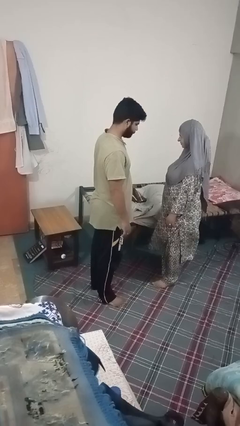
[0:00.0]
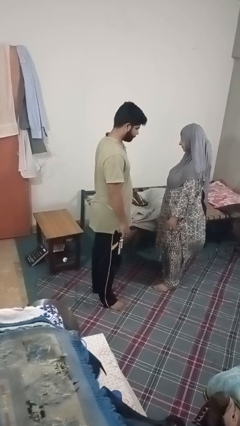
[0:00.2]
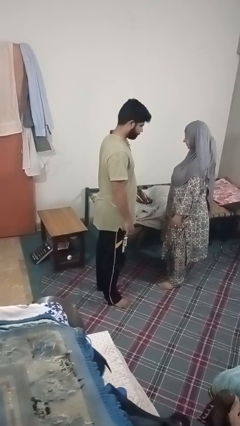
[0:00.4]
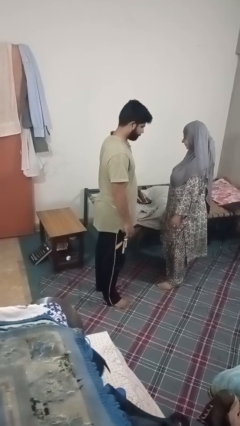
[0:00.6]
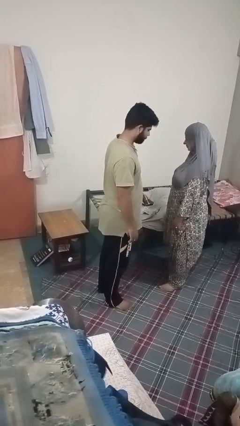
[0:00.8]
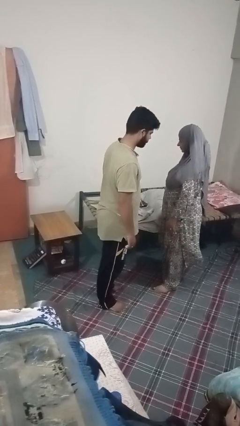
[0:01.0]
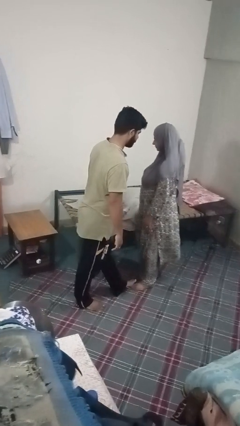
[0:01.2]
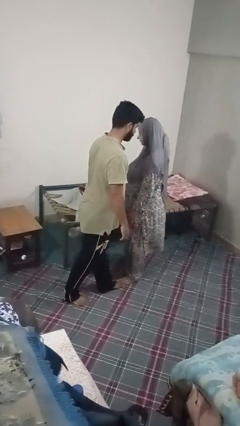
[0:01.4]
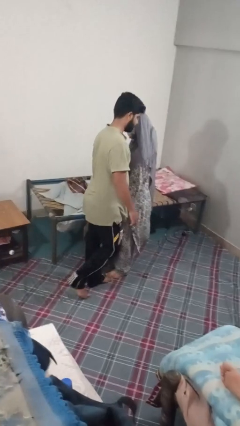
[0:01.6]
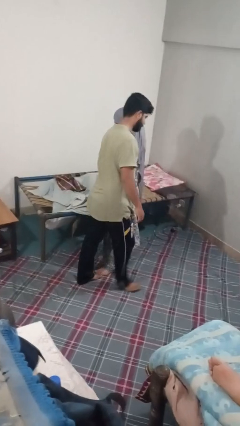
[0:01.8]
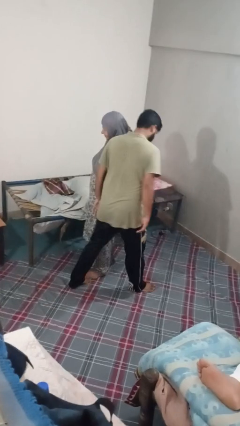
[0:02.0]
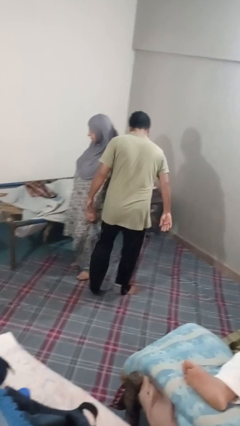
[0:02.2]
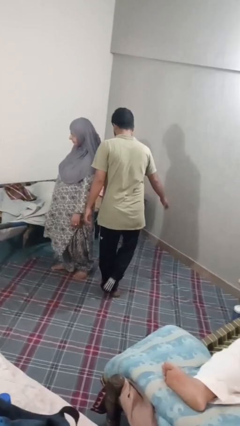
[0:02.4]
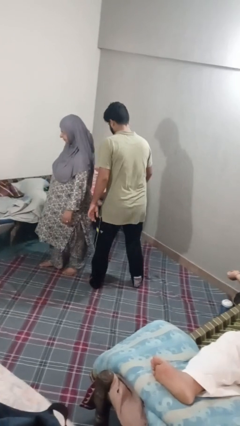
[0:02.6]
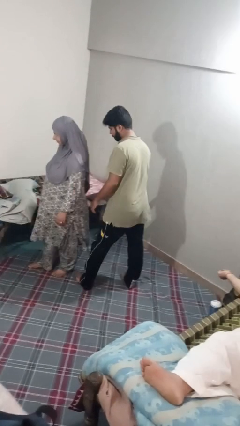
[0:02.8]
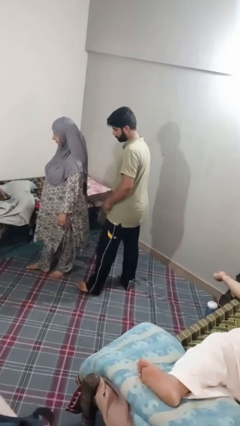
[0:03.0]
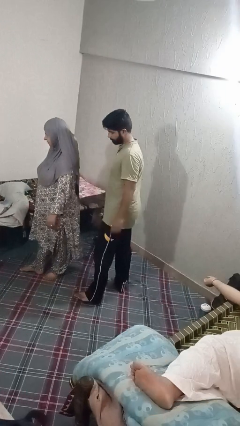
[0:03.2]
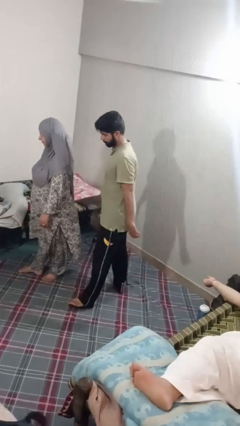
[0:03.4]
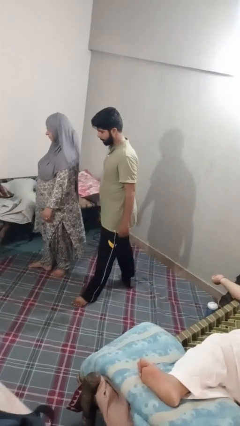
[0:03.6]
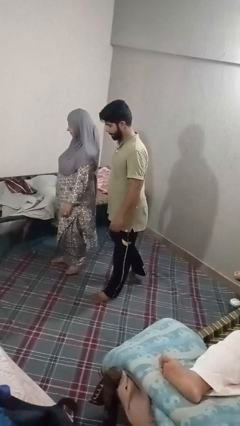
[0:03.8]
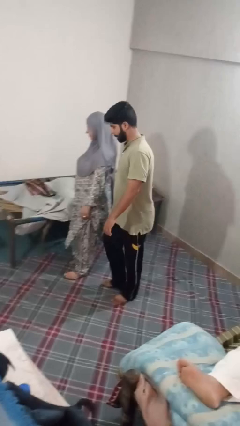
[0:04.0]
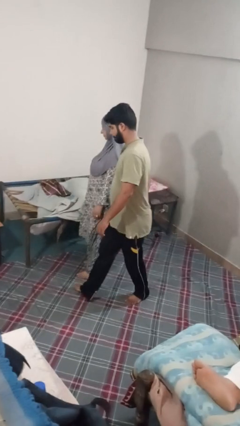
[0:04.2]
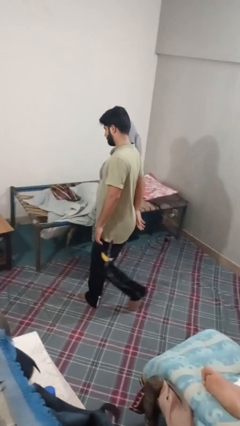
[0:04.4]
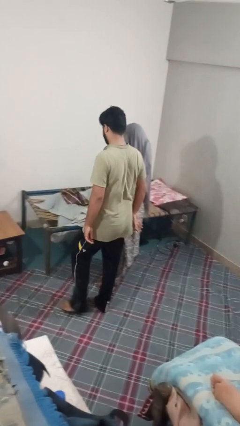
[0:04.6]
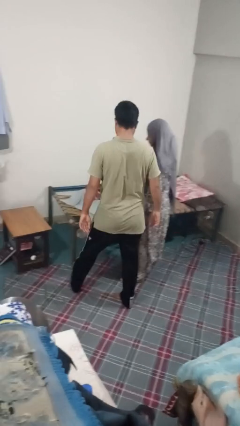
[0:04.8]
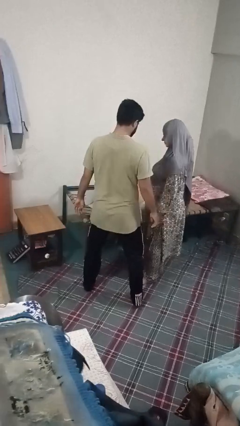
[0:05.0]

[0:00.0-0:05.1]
person bumps into person

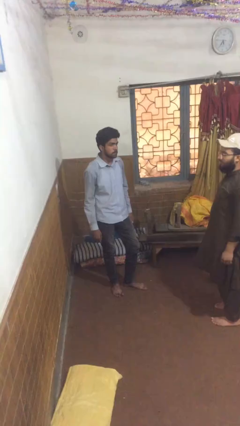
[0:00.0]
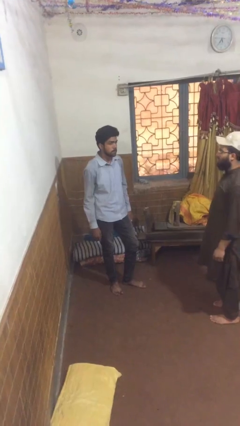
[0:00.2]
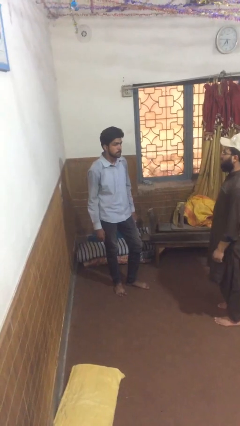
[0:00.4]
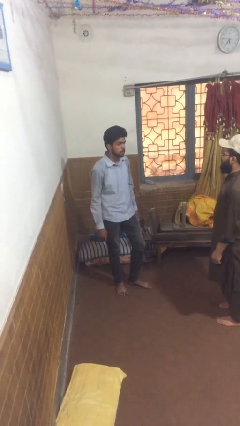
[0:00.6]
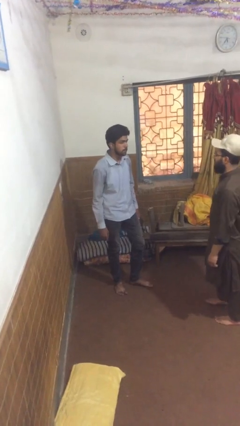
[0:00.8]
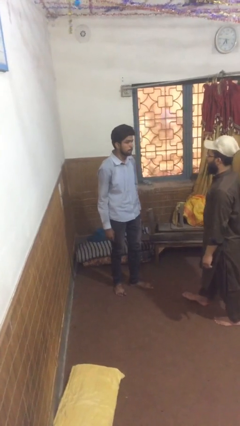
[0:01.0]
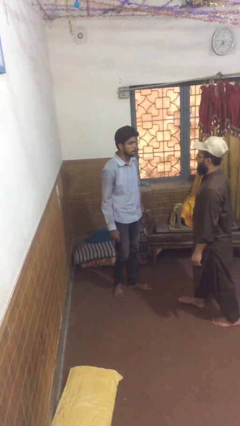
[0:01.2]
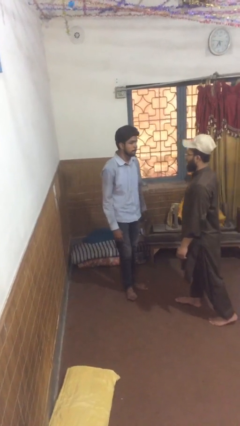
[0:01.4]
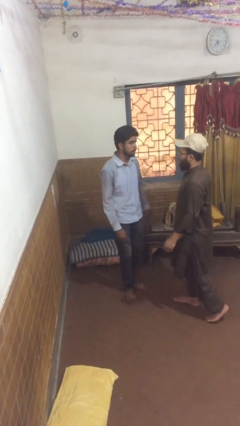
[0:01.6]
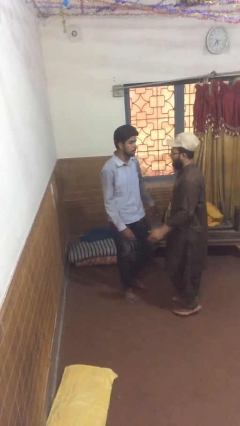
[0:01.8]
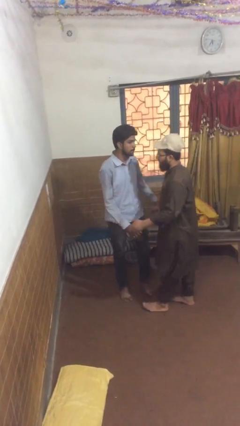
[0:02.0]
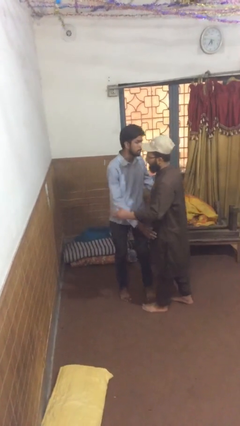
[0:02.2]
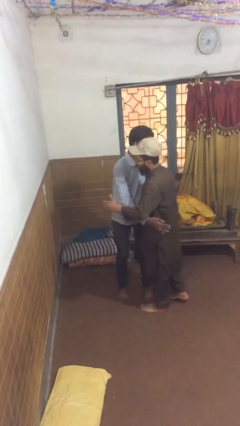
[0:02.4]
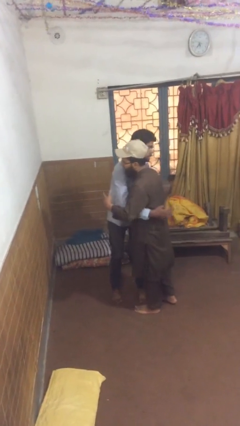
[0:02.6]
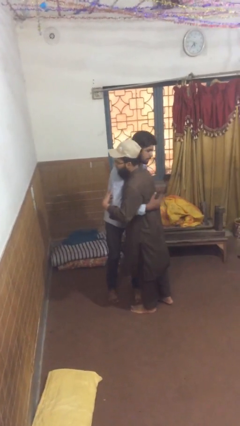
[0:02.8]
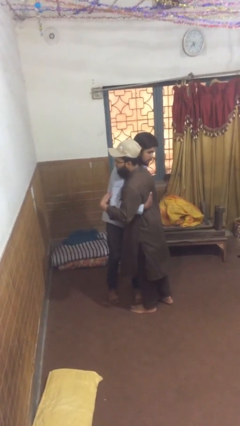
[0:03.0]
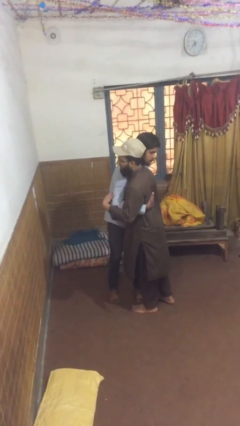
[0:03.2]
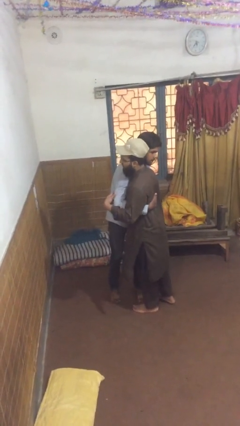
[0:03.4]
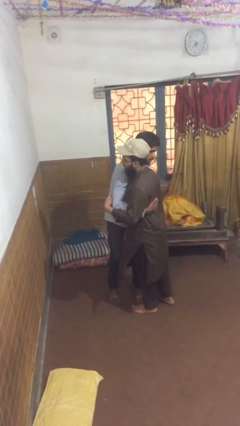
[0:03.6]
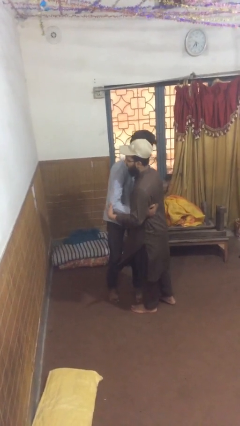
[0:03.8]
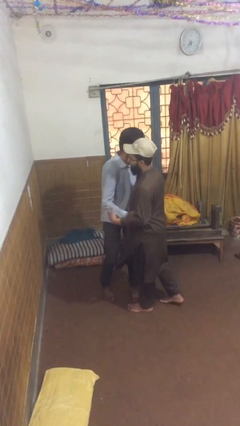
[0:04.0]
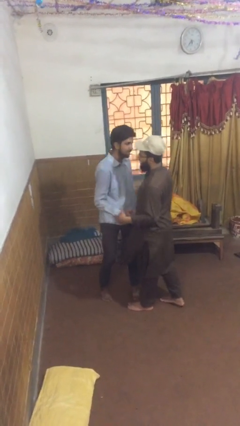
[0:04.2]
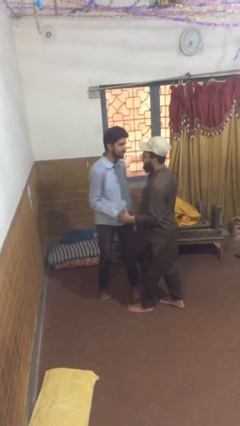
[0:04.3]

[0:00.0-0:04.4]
person embraces person

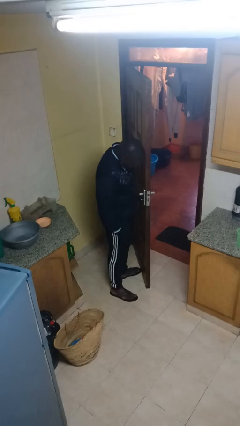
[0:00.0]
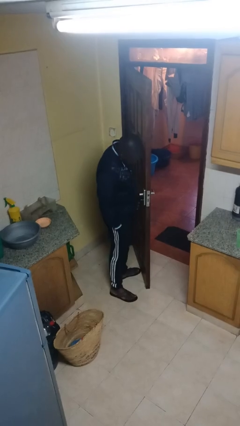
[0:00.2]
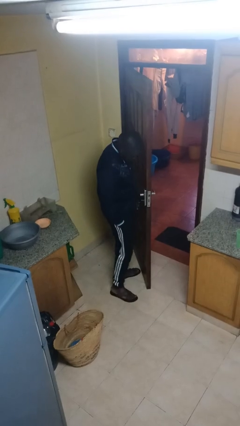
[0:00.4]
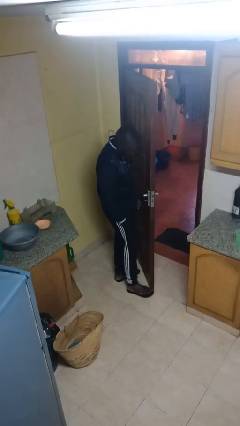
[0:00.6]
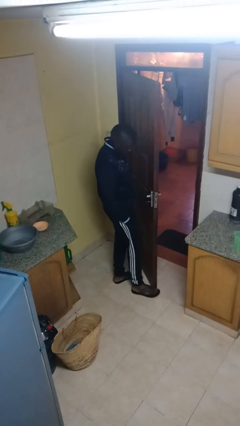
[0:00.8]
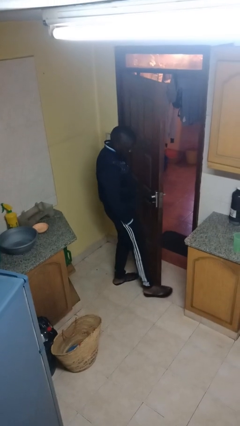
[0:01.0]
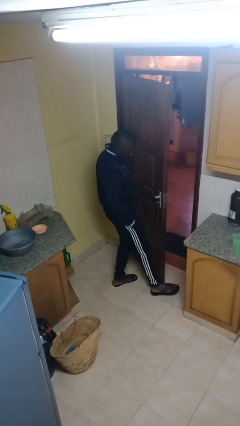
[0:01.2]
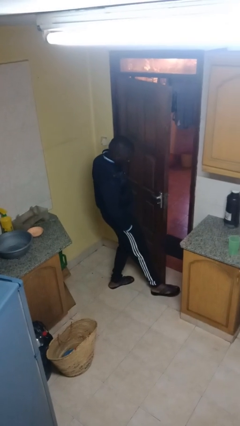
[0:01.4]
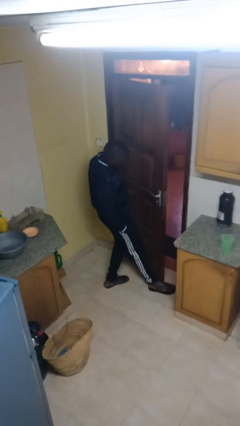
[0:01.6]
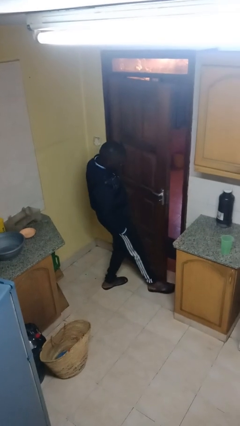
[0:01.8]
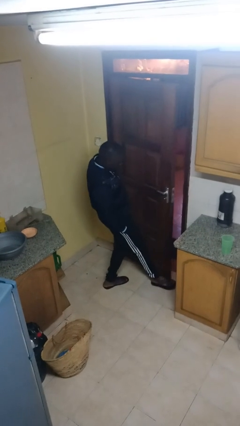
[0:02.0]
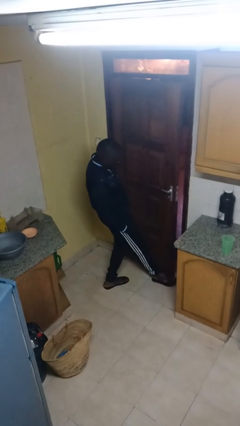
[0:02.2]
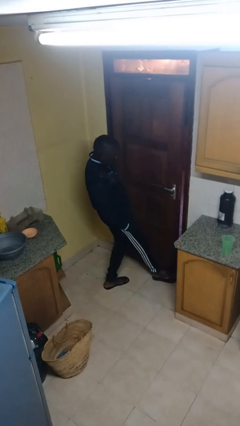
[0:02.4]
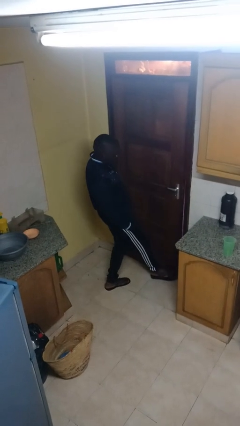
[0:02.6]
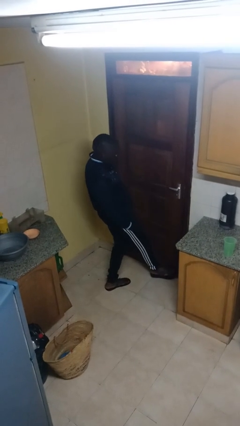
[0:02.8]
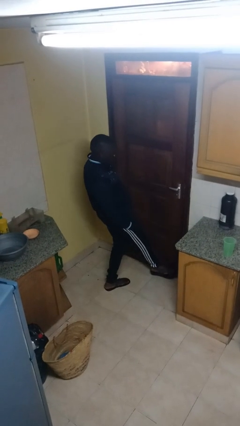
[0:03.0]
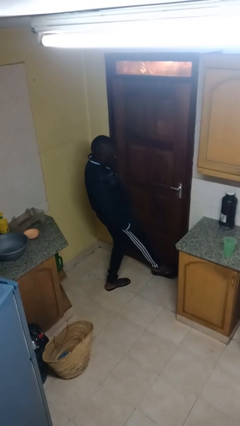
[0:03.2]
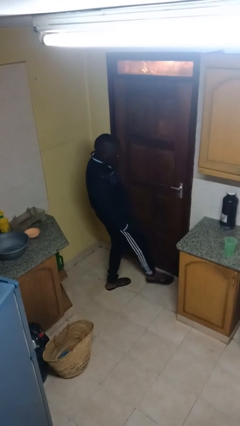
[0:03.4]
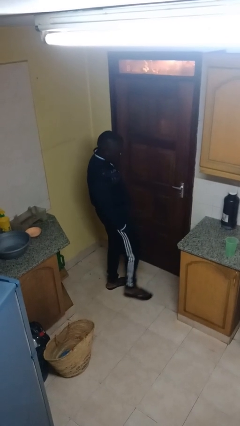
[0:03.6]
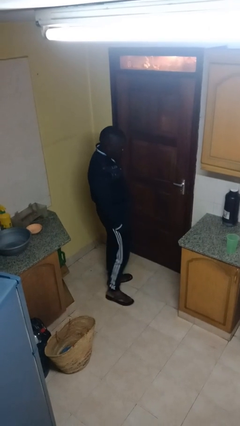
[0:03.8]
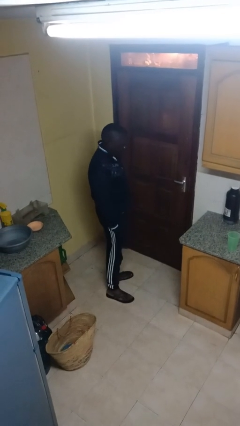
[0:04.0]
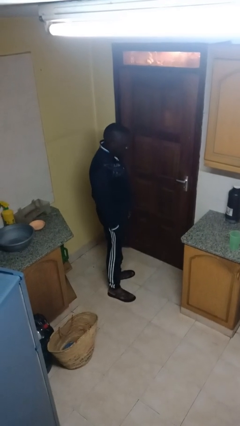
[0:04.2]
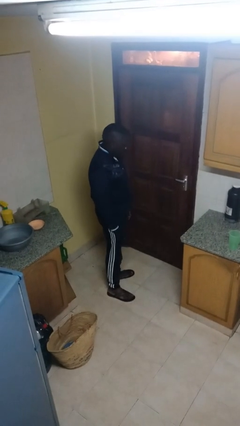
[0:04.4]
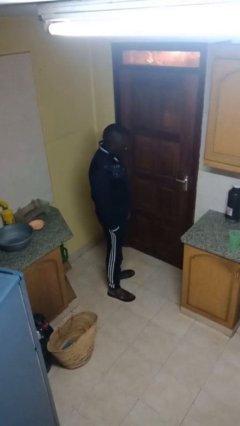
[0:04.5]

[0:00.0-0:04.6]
person closes door with foot

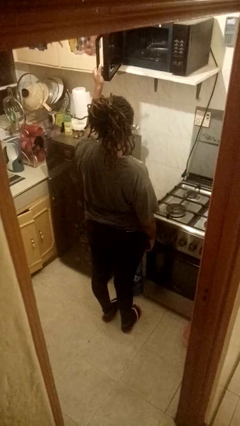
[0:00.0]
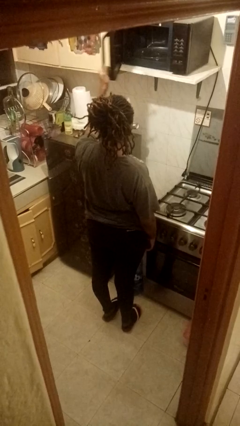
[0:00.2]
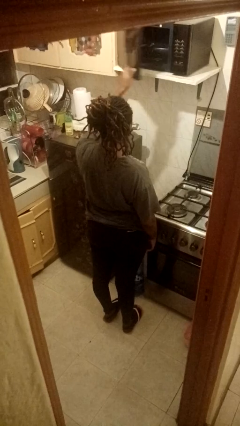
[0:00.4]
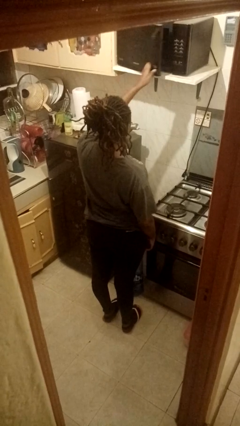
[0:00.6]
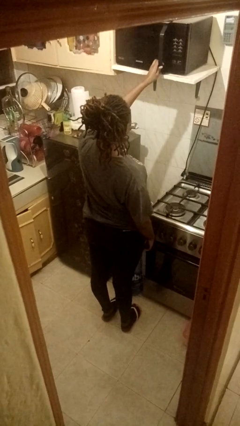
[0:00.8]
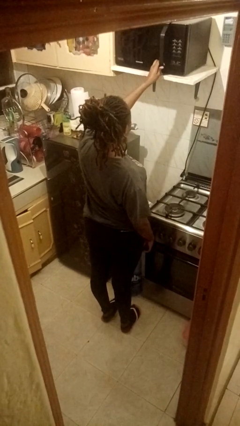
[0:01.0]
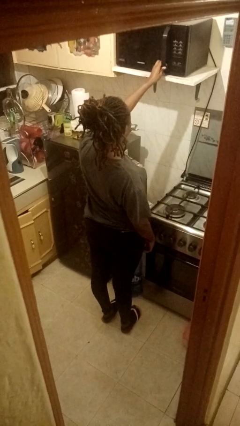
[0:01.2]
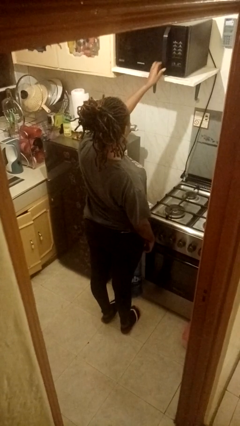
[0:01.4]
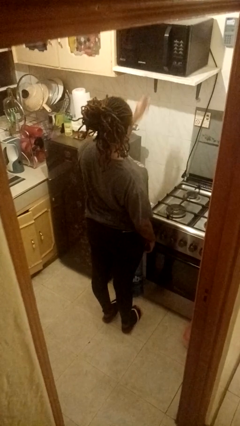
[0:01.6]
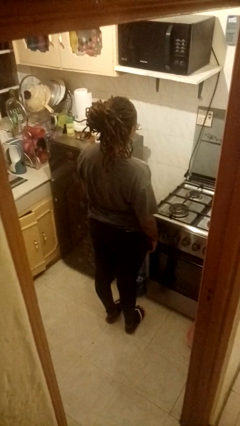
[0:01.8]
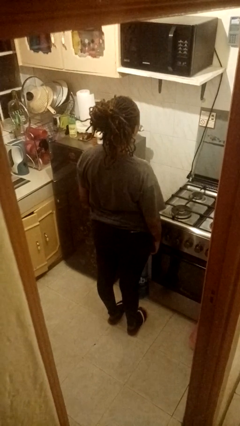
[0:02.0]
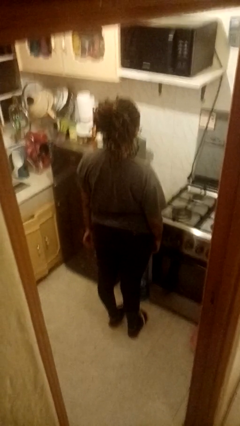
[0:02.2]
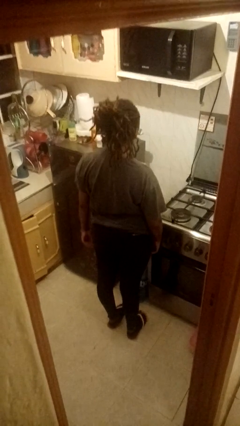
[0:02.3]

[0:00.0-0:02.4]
person closes microwave

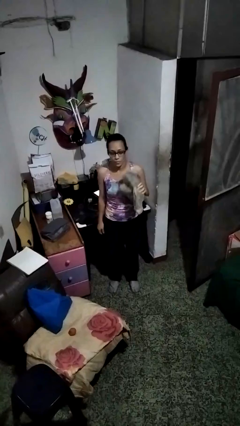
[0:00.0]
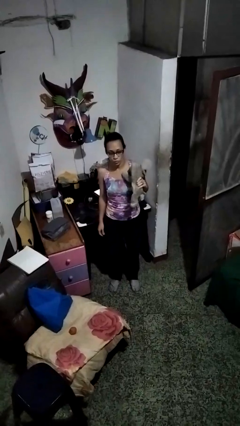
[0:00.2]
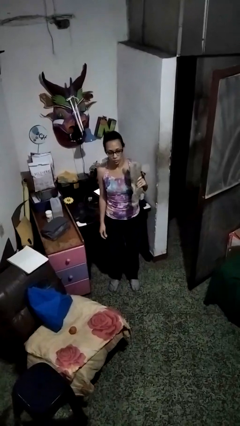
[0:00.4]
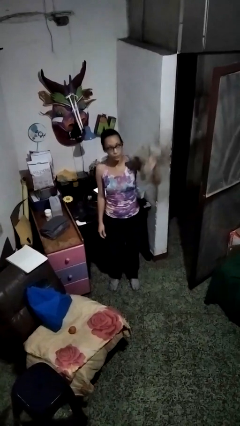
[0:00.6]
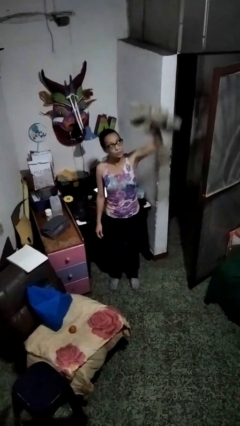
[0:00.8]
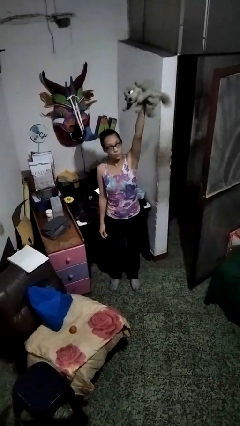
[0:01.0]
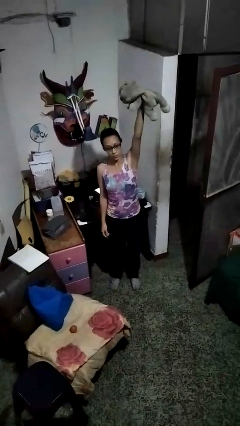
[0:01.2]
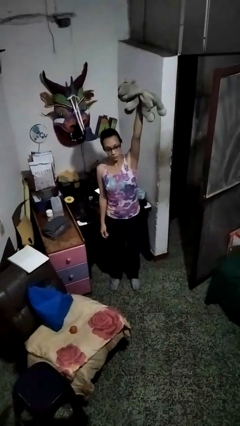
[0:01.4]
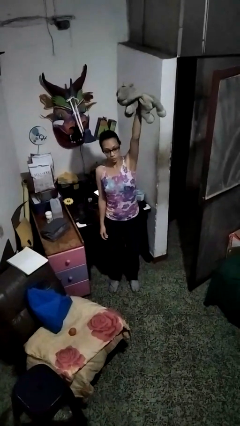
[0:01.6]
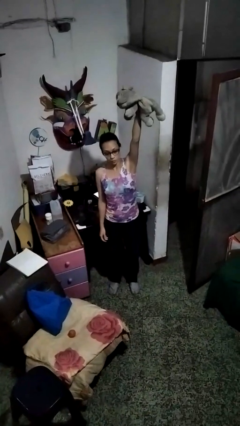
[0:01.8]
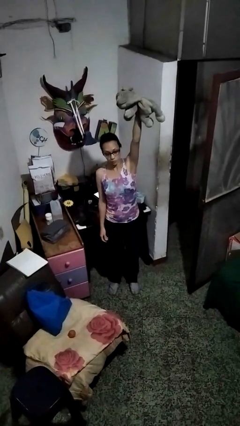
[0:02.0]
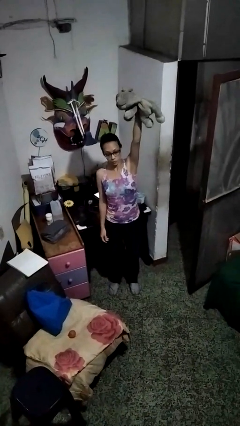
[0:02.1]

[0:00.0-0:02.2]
person drops object
